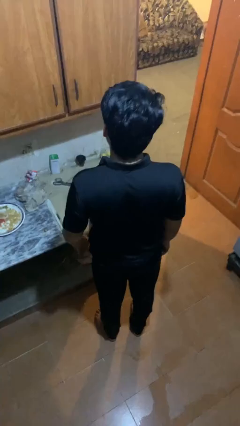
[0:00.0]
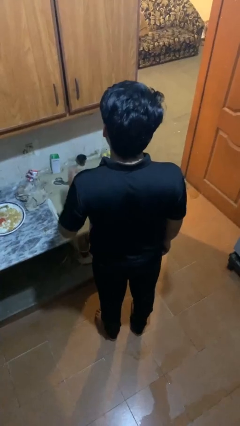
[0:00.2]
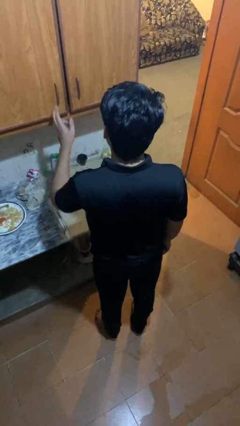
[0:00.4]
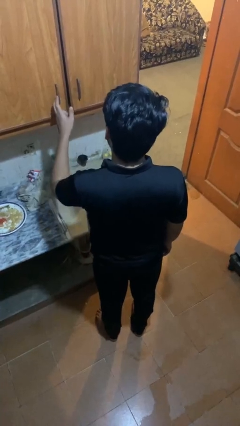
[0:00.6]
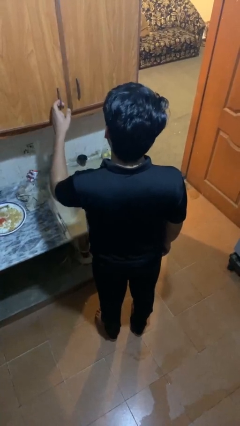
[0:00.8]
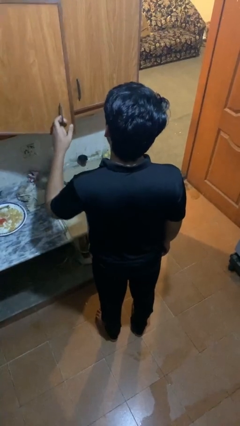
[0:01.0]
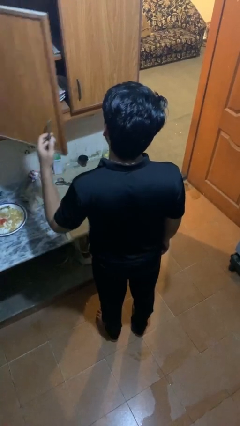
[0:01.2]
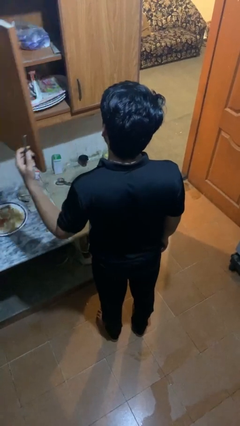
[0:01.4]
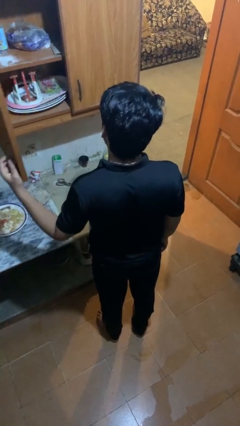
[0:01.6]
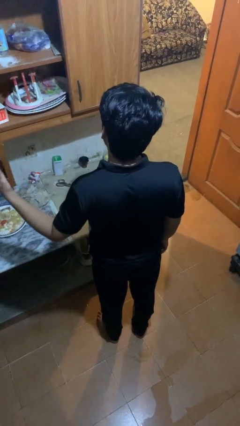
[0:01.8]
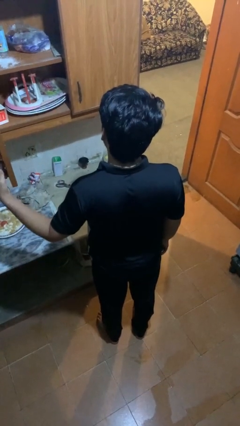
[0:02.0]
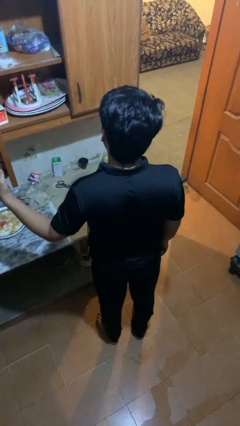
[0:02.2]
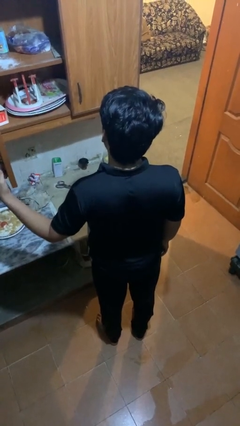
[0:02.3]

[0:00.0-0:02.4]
person opens cabinet

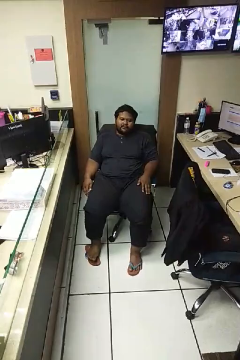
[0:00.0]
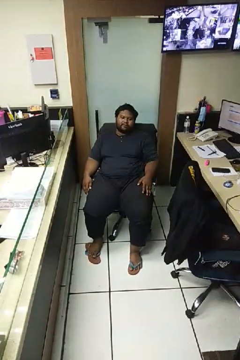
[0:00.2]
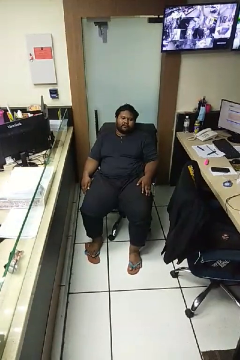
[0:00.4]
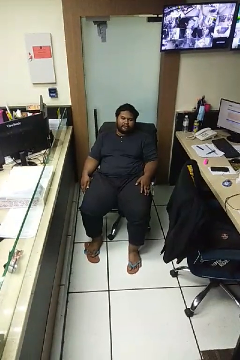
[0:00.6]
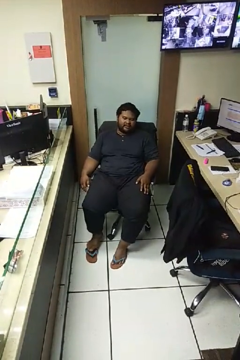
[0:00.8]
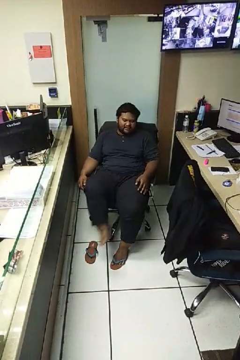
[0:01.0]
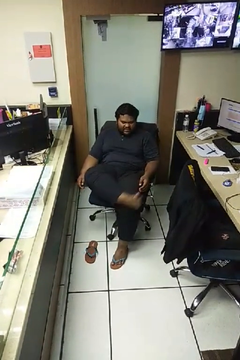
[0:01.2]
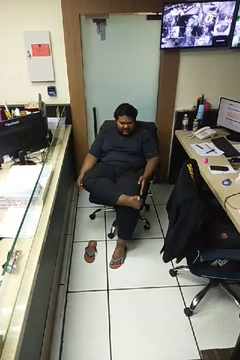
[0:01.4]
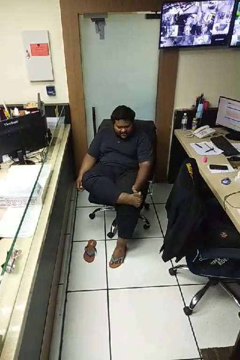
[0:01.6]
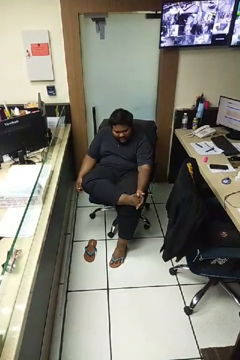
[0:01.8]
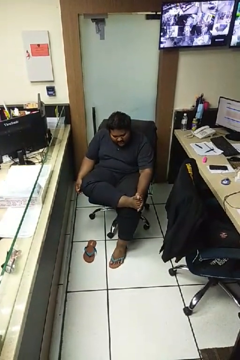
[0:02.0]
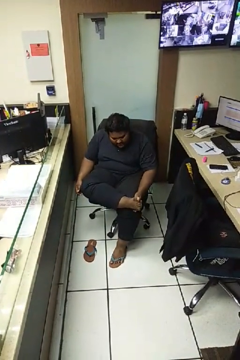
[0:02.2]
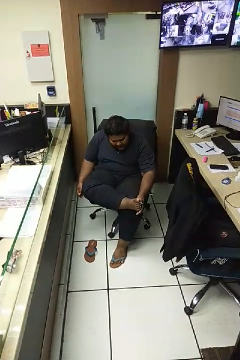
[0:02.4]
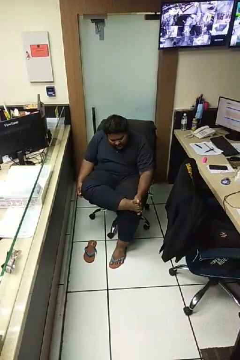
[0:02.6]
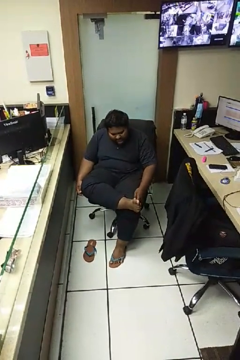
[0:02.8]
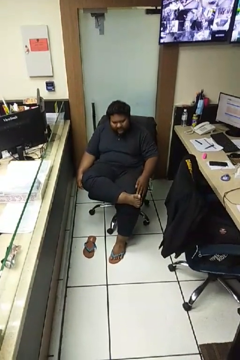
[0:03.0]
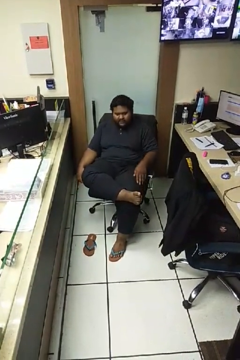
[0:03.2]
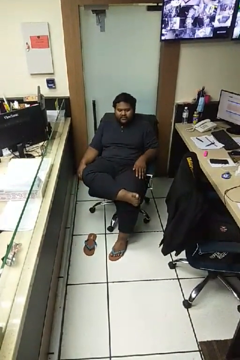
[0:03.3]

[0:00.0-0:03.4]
person rubs foot

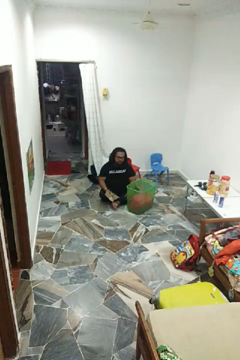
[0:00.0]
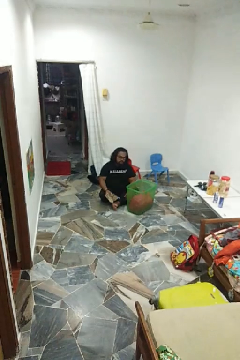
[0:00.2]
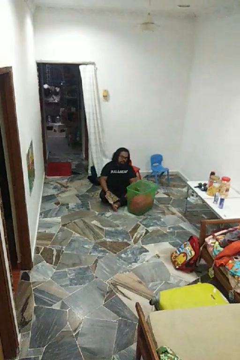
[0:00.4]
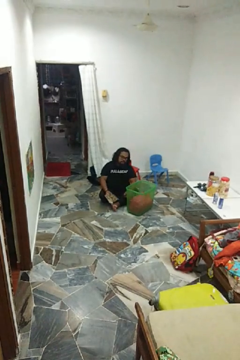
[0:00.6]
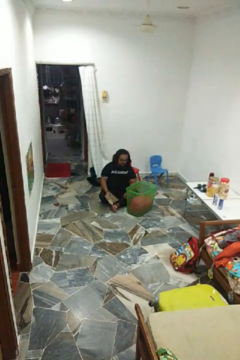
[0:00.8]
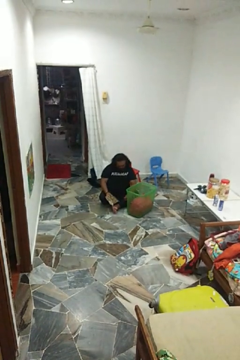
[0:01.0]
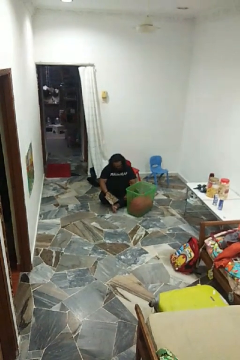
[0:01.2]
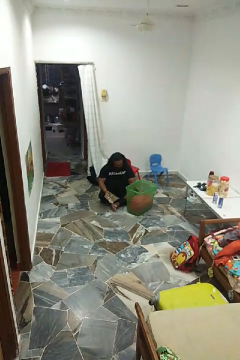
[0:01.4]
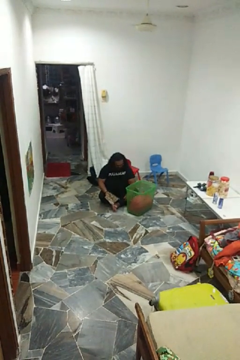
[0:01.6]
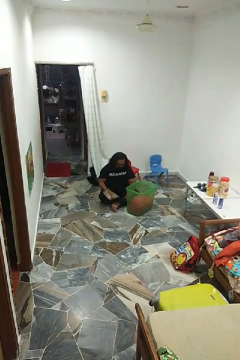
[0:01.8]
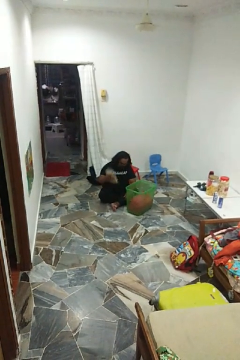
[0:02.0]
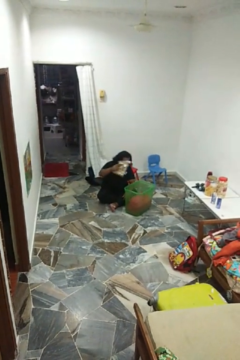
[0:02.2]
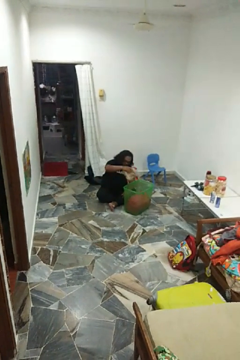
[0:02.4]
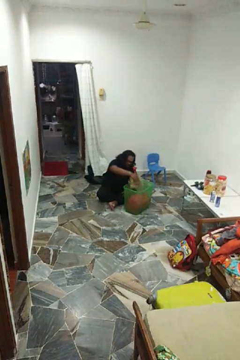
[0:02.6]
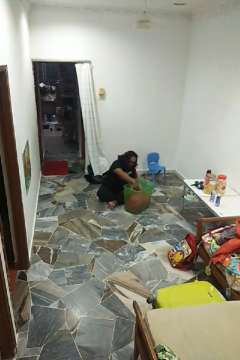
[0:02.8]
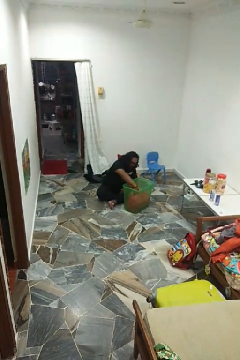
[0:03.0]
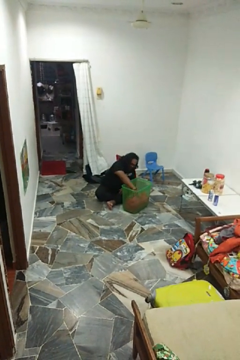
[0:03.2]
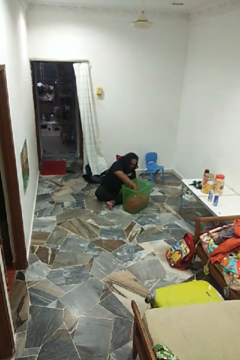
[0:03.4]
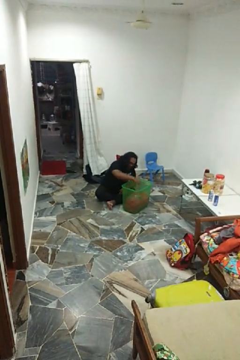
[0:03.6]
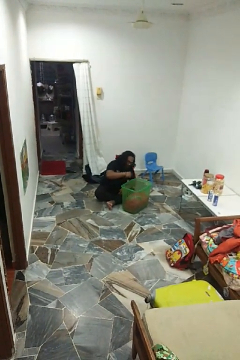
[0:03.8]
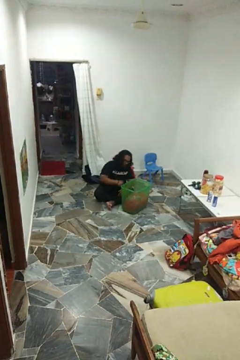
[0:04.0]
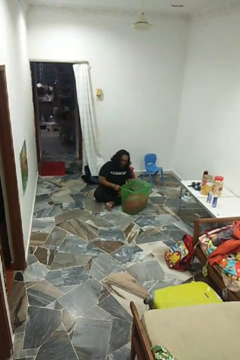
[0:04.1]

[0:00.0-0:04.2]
person puts object into basket

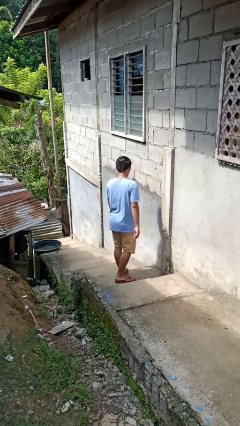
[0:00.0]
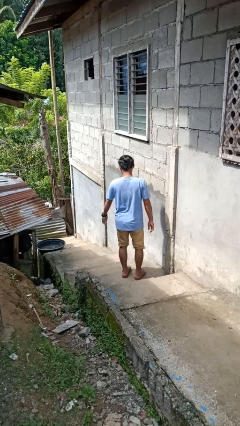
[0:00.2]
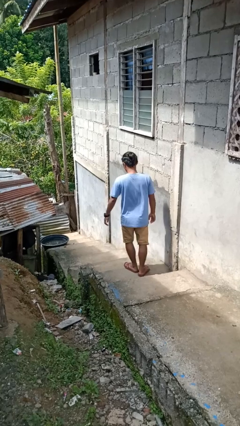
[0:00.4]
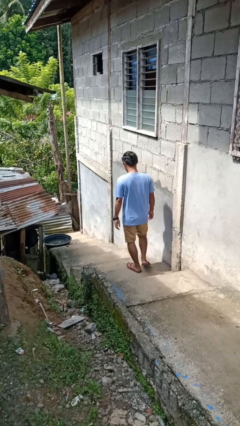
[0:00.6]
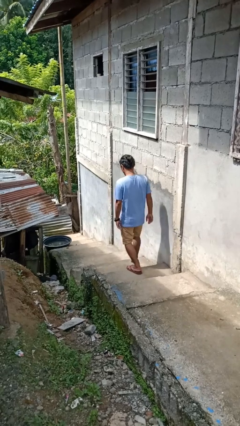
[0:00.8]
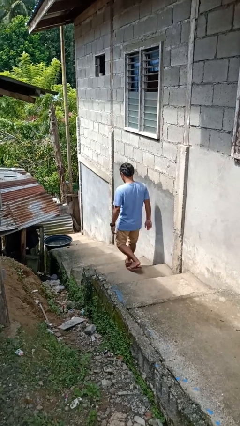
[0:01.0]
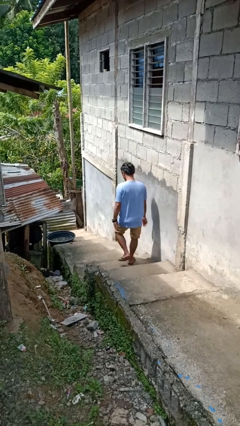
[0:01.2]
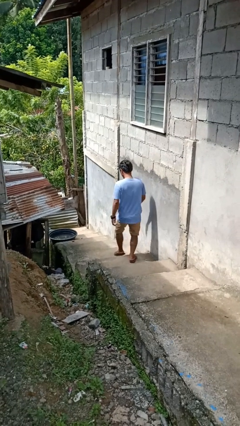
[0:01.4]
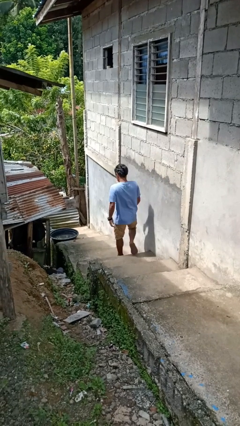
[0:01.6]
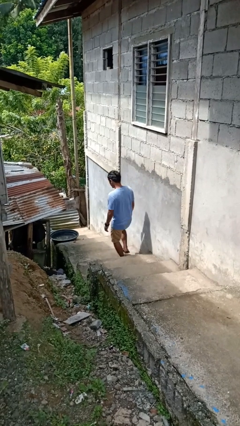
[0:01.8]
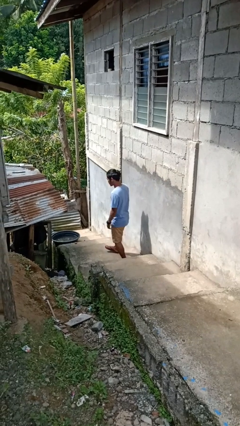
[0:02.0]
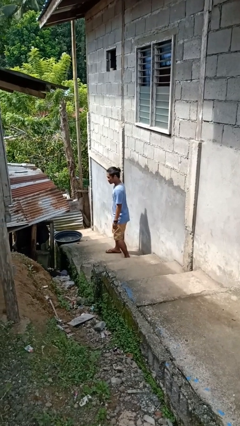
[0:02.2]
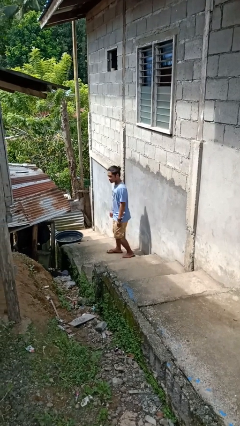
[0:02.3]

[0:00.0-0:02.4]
person climbs down stairs

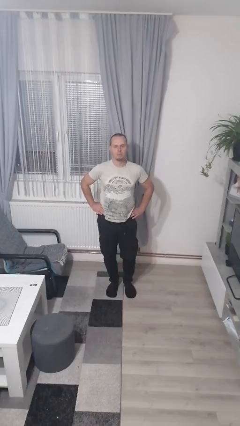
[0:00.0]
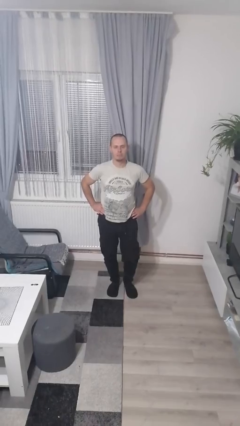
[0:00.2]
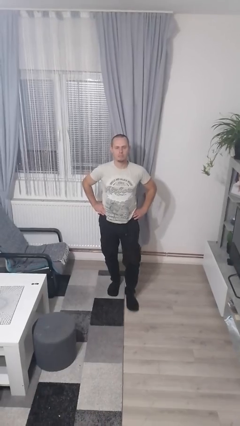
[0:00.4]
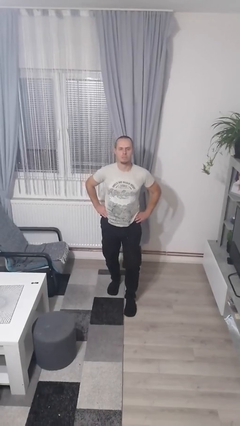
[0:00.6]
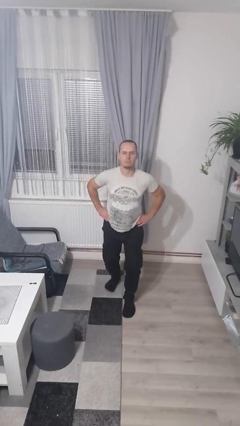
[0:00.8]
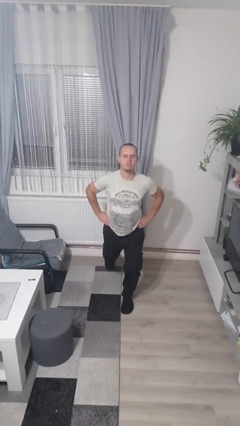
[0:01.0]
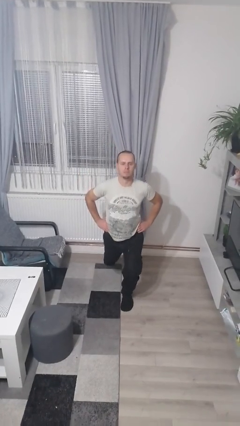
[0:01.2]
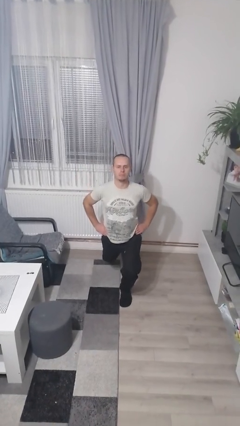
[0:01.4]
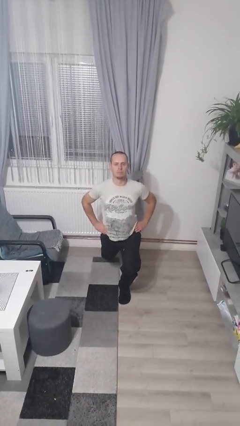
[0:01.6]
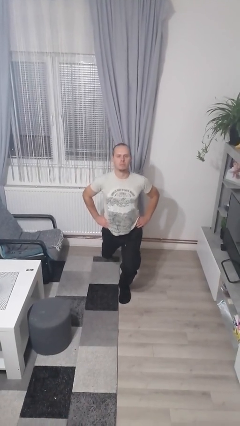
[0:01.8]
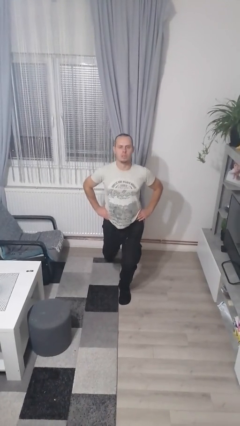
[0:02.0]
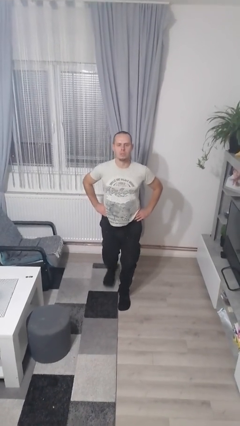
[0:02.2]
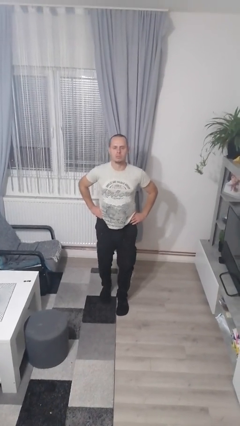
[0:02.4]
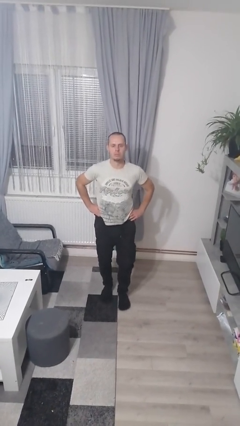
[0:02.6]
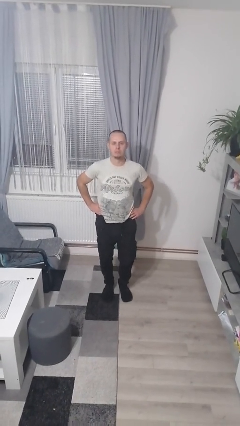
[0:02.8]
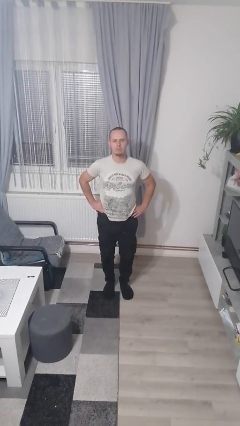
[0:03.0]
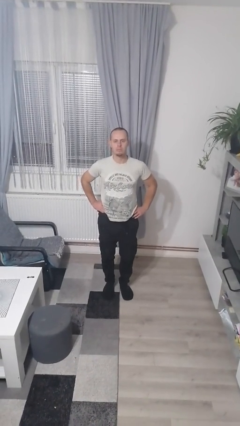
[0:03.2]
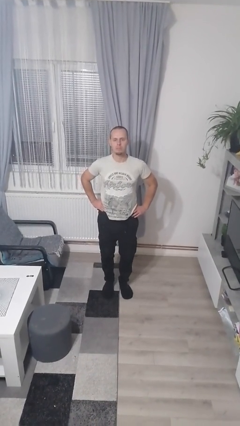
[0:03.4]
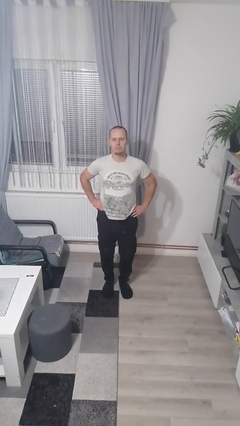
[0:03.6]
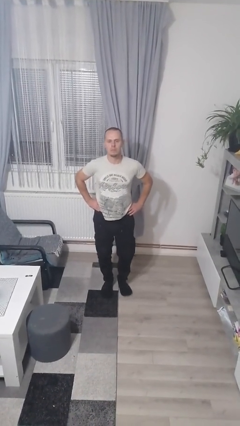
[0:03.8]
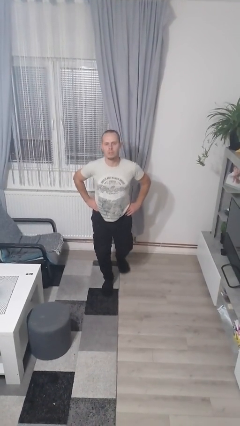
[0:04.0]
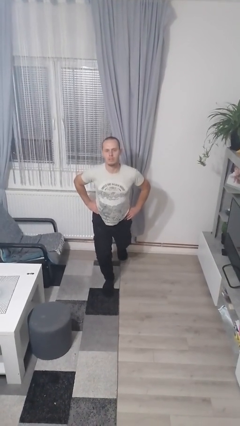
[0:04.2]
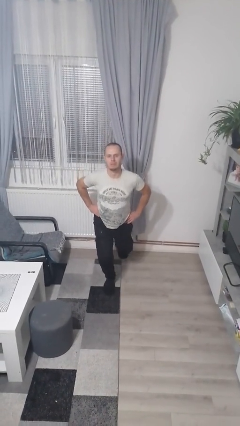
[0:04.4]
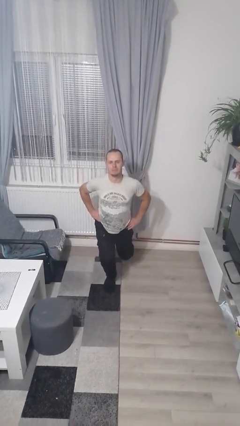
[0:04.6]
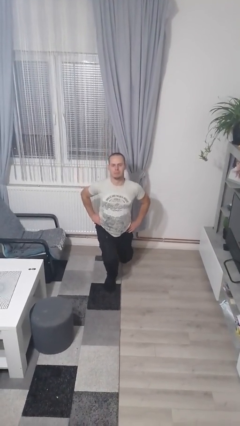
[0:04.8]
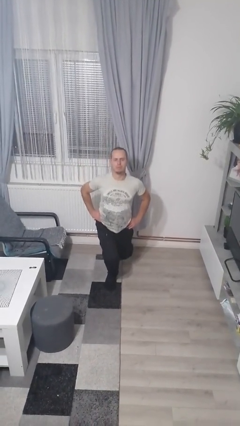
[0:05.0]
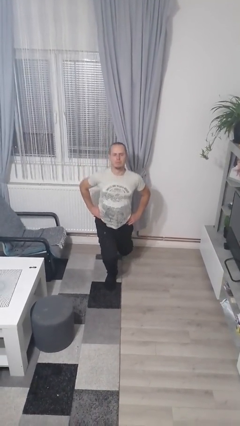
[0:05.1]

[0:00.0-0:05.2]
person exercises with lunges

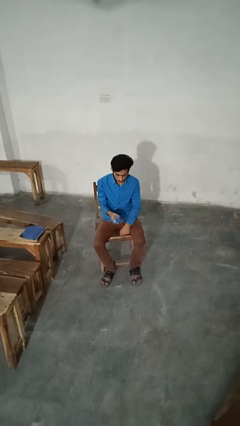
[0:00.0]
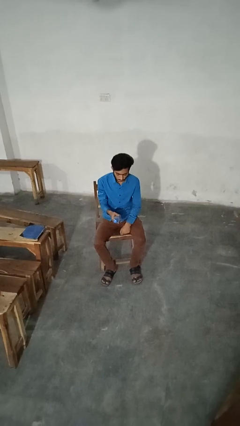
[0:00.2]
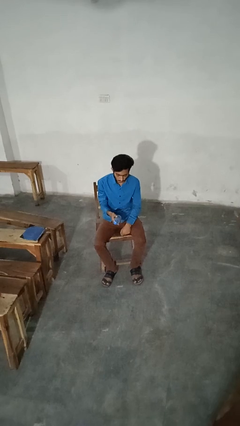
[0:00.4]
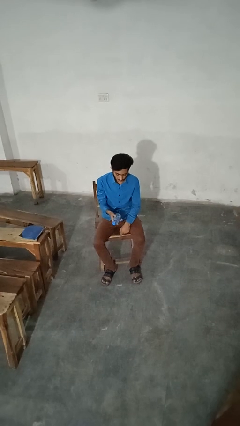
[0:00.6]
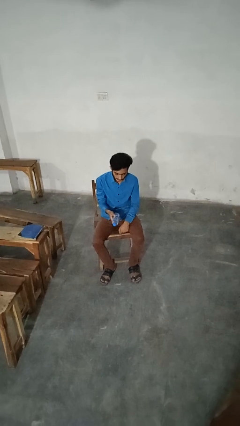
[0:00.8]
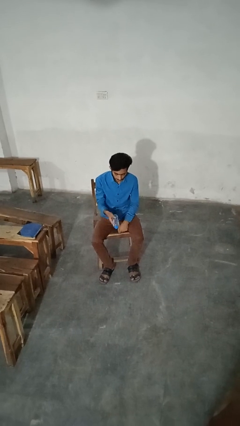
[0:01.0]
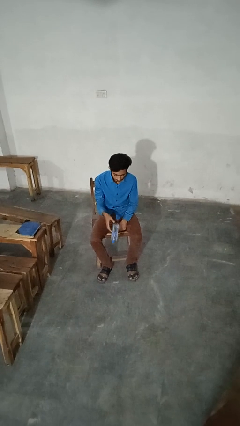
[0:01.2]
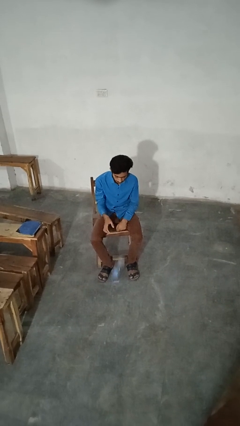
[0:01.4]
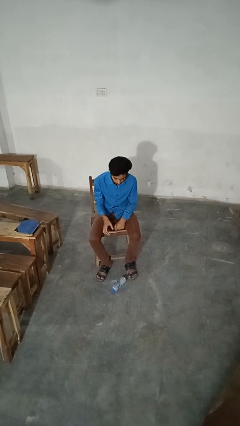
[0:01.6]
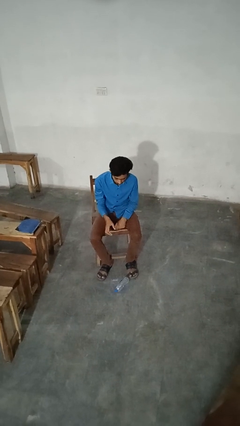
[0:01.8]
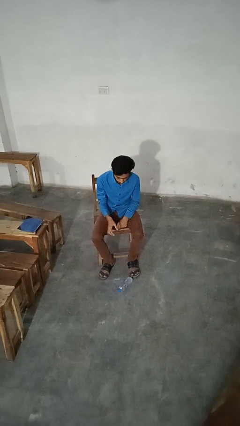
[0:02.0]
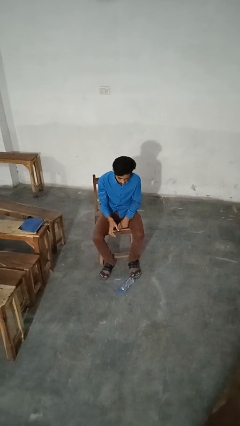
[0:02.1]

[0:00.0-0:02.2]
person drops object
